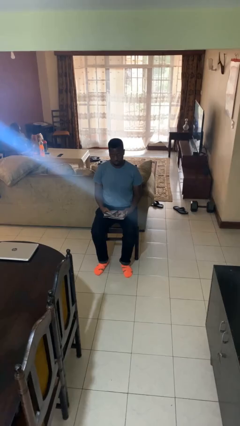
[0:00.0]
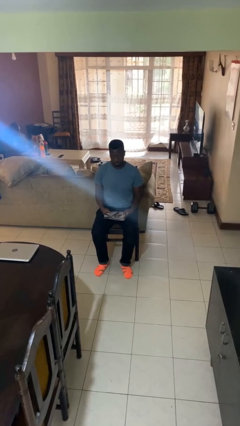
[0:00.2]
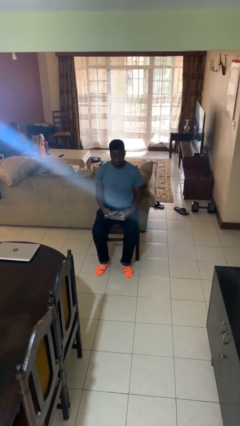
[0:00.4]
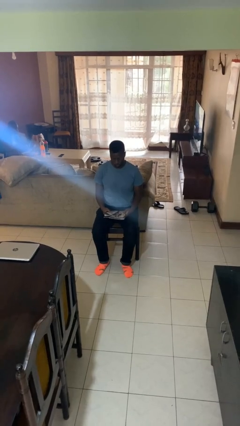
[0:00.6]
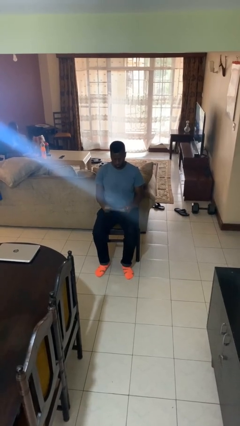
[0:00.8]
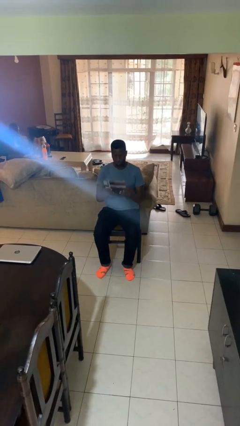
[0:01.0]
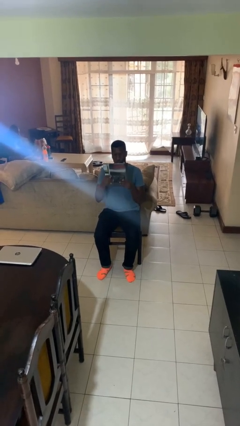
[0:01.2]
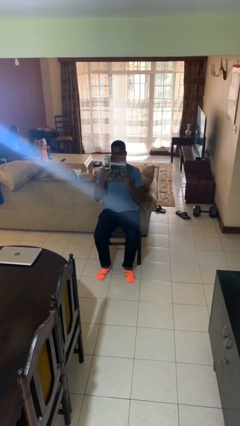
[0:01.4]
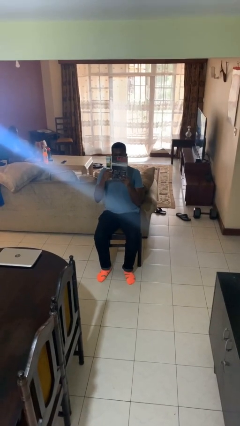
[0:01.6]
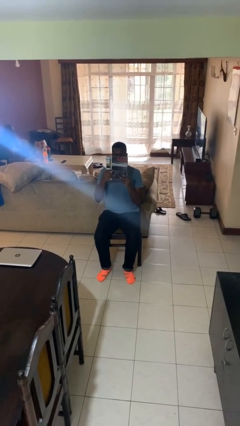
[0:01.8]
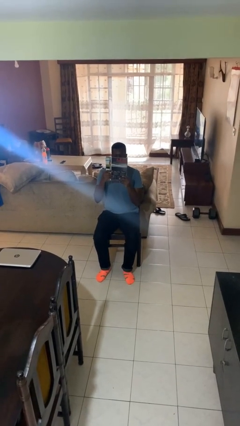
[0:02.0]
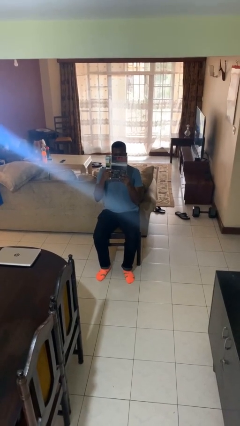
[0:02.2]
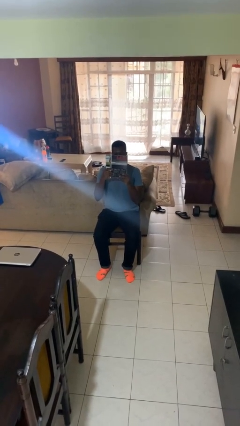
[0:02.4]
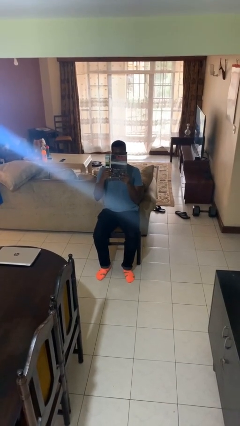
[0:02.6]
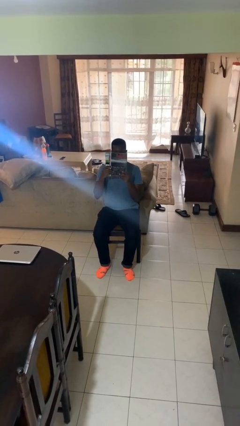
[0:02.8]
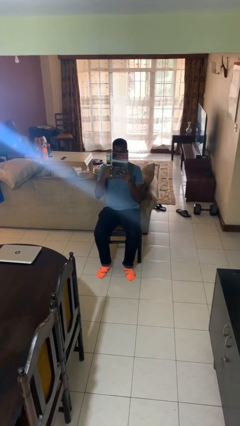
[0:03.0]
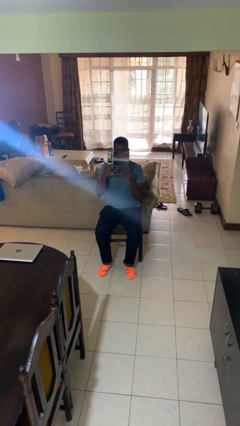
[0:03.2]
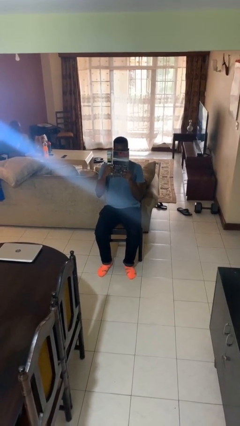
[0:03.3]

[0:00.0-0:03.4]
person reads document

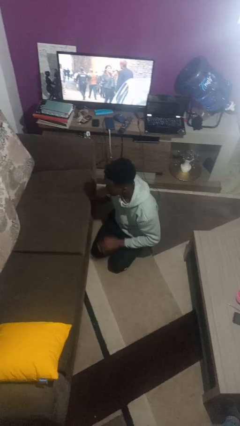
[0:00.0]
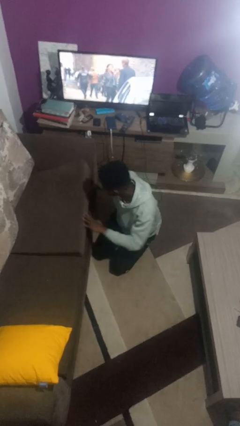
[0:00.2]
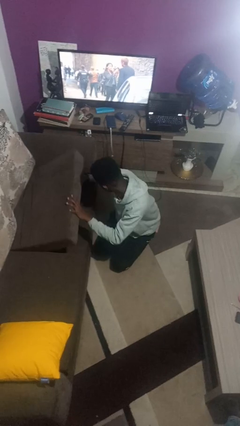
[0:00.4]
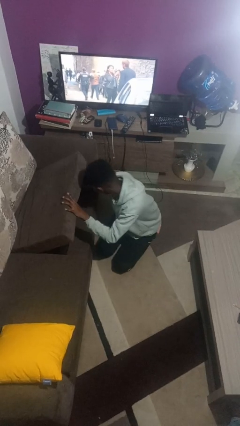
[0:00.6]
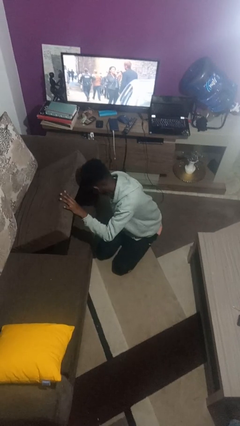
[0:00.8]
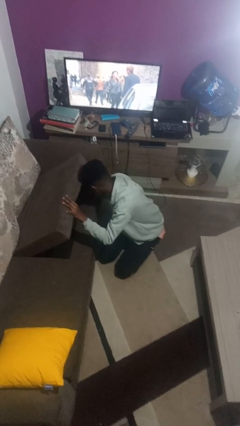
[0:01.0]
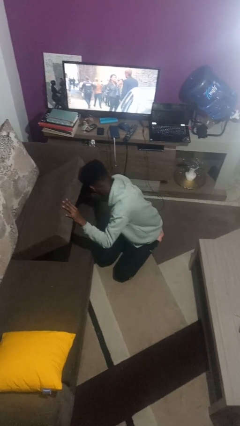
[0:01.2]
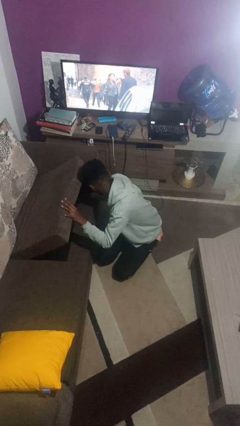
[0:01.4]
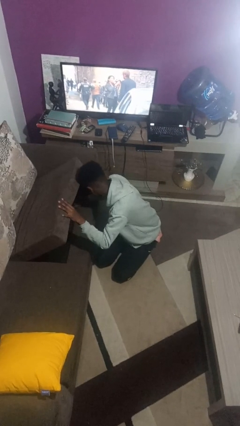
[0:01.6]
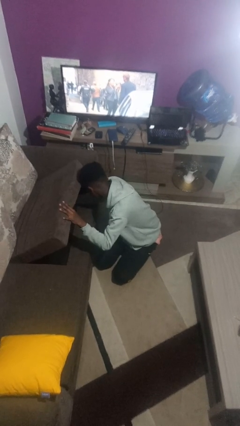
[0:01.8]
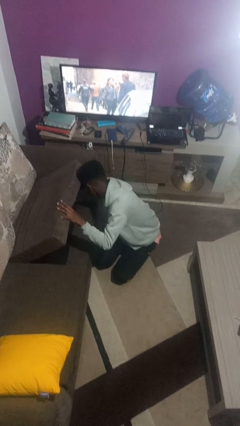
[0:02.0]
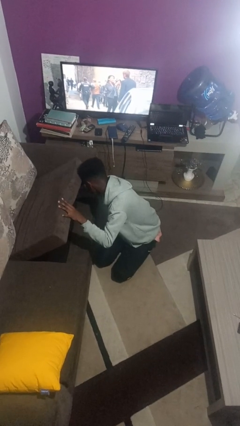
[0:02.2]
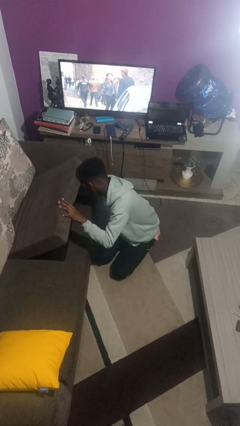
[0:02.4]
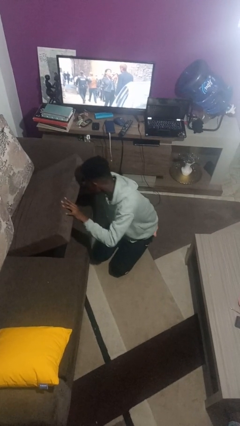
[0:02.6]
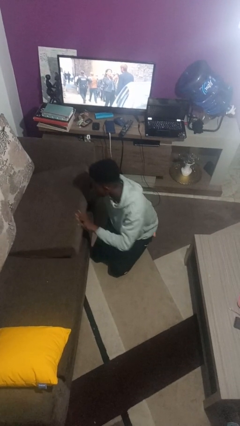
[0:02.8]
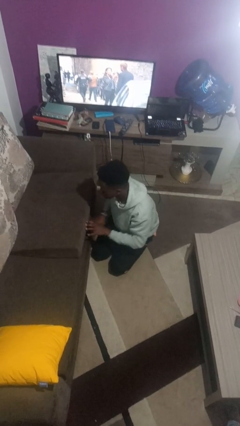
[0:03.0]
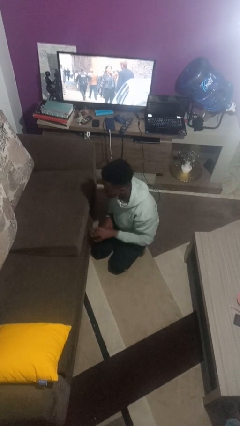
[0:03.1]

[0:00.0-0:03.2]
person searches under couch

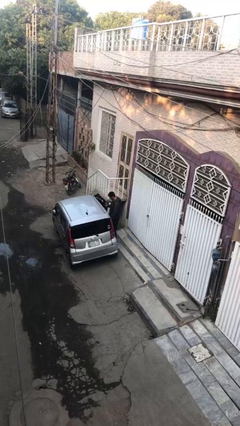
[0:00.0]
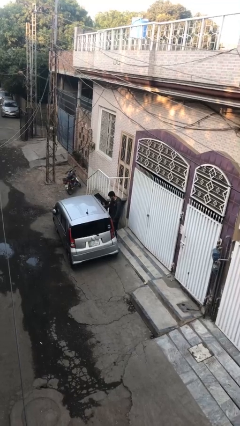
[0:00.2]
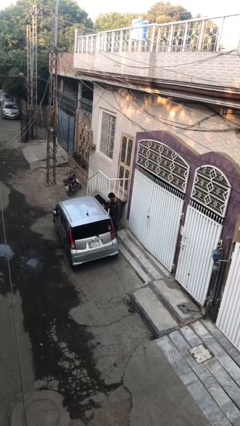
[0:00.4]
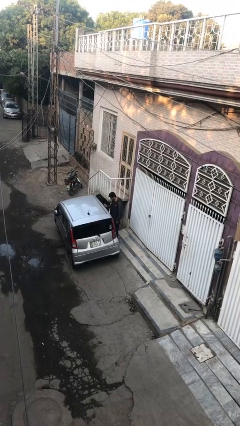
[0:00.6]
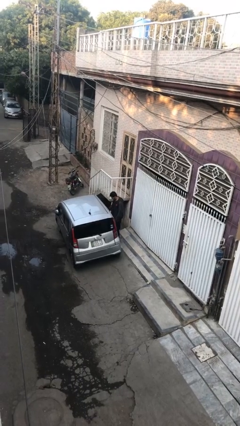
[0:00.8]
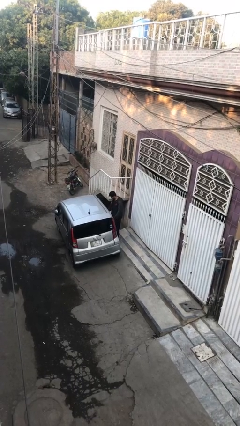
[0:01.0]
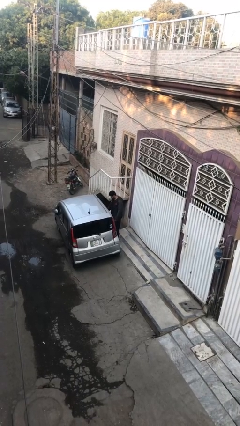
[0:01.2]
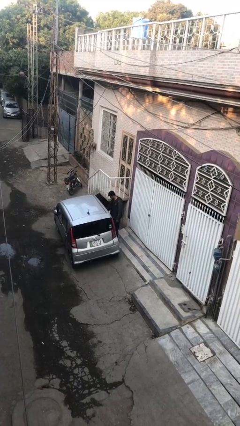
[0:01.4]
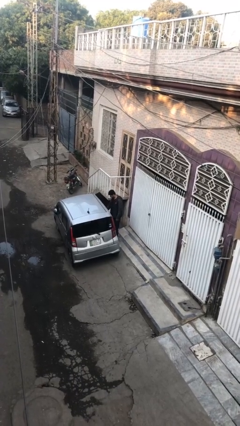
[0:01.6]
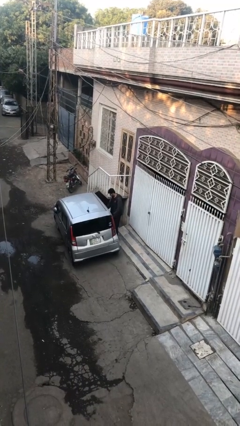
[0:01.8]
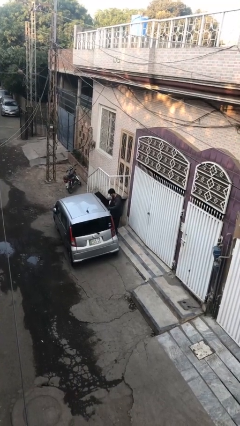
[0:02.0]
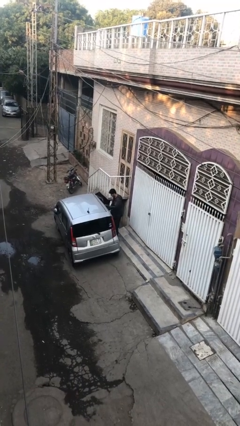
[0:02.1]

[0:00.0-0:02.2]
person closes car door

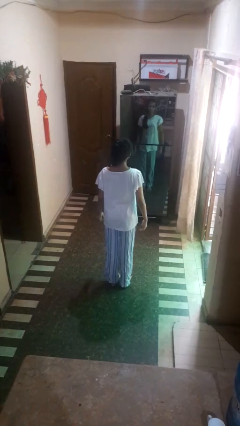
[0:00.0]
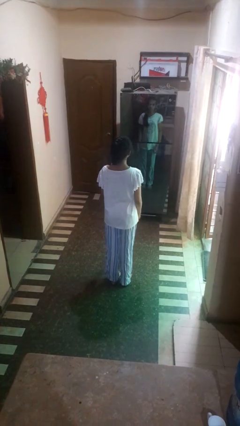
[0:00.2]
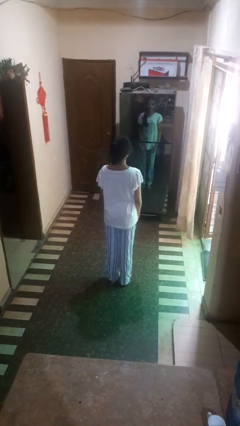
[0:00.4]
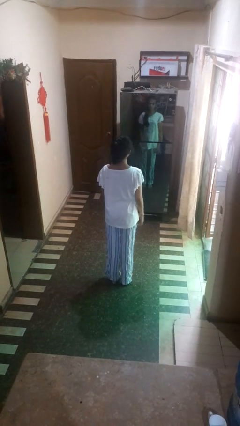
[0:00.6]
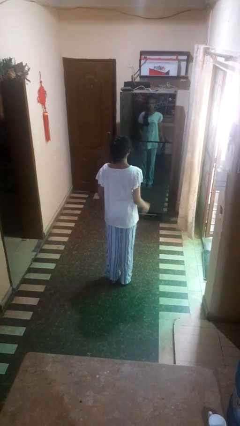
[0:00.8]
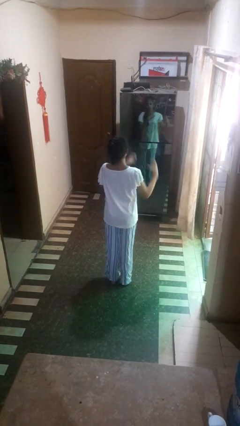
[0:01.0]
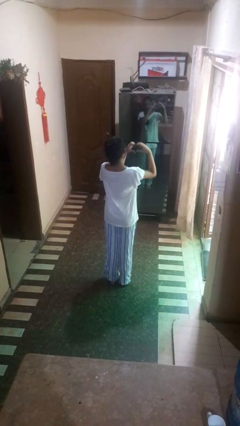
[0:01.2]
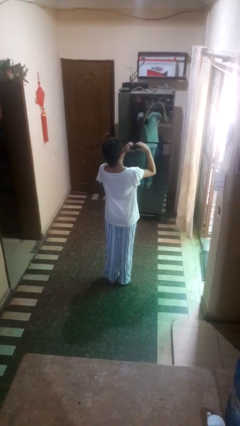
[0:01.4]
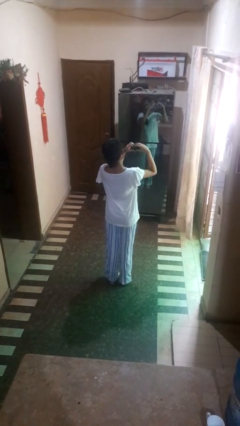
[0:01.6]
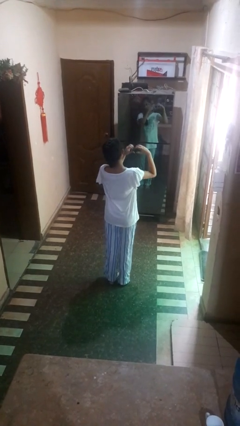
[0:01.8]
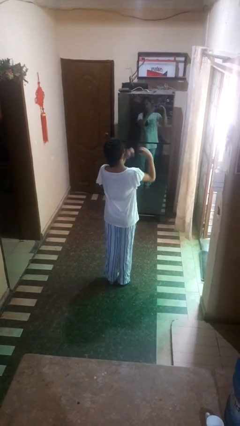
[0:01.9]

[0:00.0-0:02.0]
person gestures heart

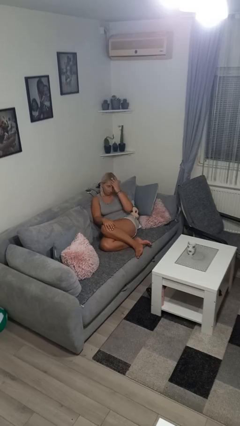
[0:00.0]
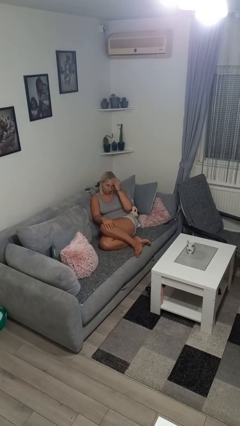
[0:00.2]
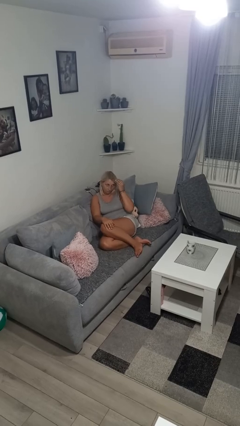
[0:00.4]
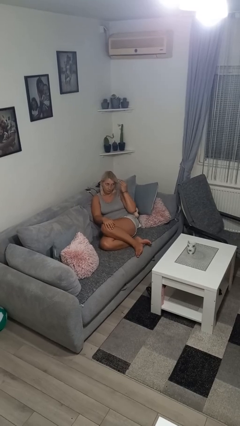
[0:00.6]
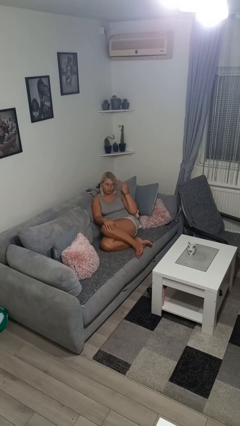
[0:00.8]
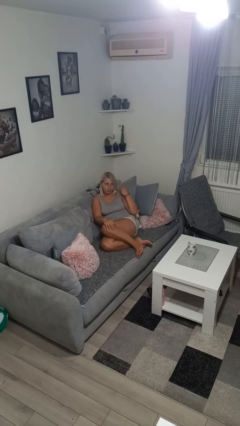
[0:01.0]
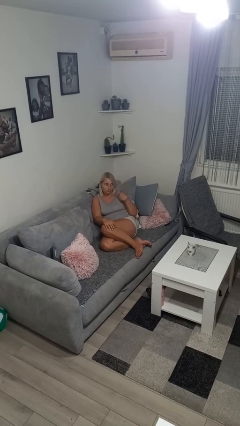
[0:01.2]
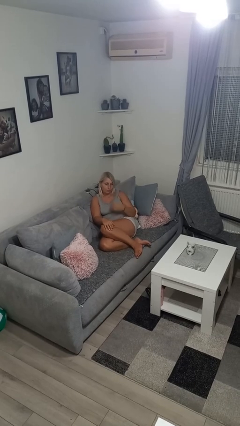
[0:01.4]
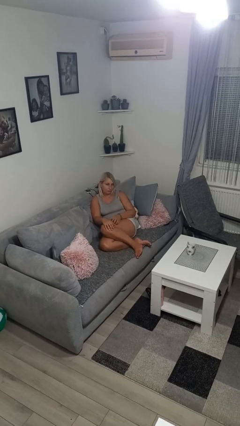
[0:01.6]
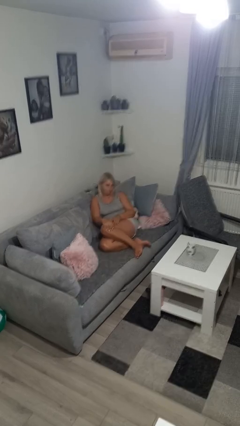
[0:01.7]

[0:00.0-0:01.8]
person strokes hair

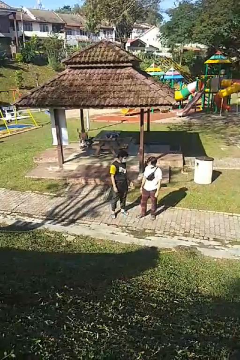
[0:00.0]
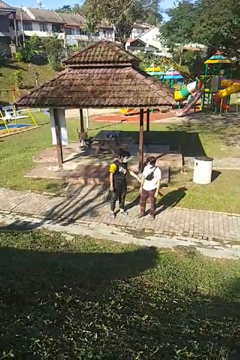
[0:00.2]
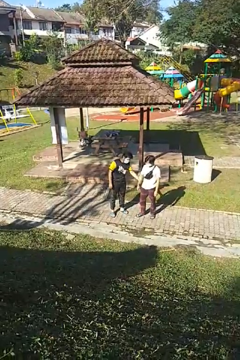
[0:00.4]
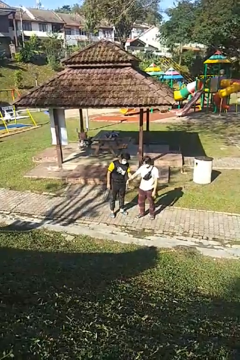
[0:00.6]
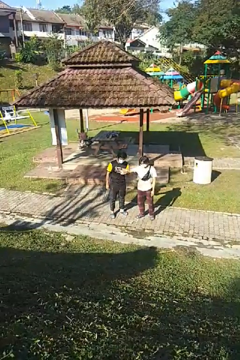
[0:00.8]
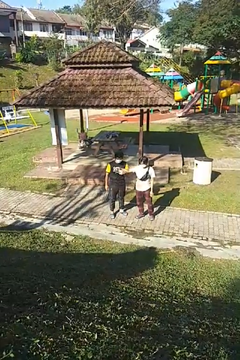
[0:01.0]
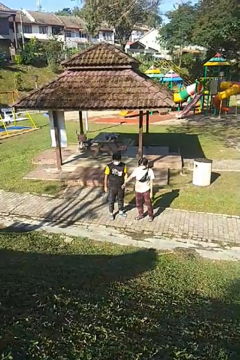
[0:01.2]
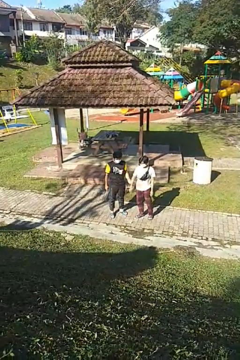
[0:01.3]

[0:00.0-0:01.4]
person grabs person by forearm

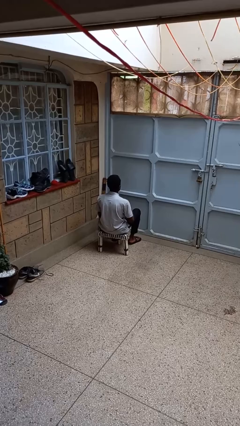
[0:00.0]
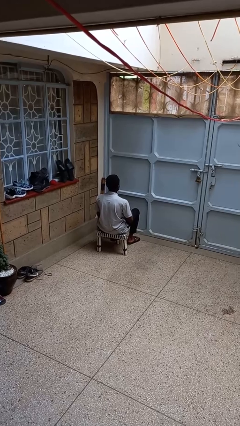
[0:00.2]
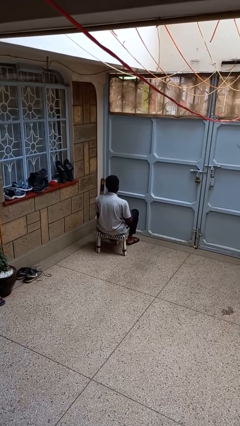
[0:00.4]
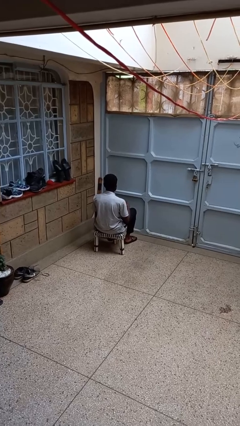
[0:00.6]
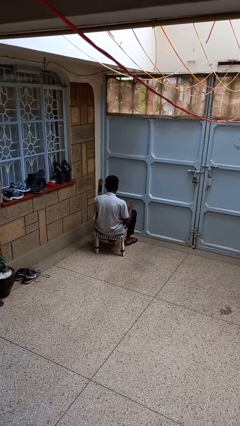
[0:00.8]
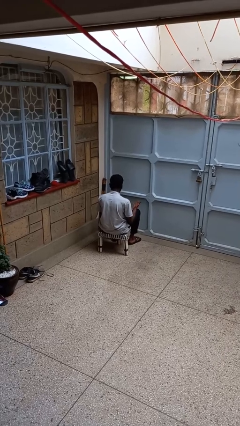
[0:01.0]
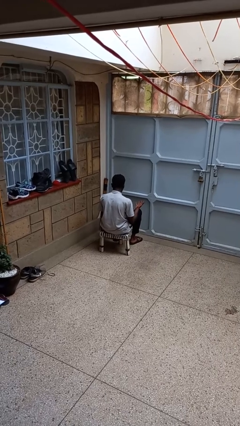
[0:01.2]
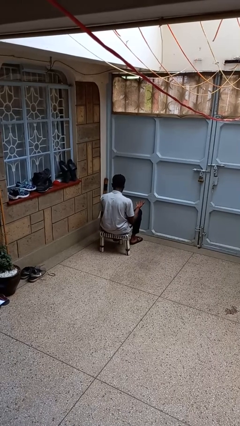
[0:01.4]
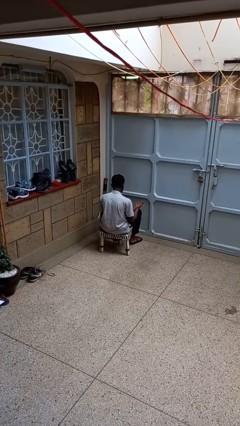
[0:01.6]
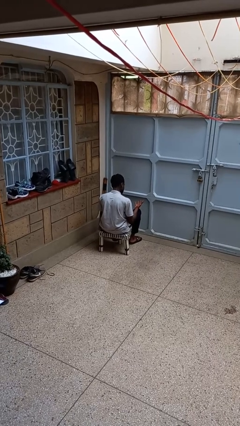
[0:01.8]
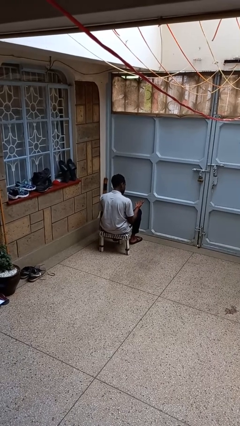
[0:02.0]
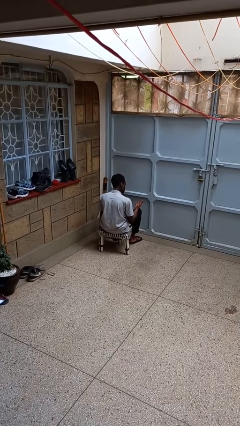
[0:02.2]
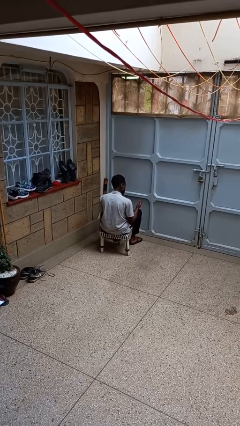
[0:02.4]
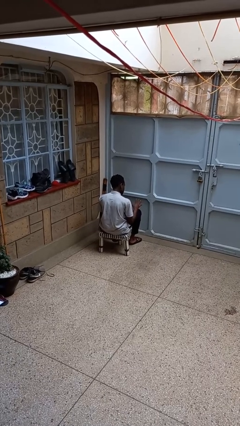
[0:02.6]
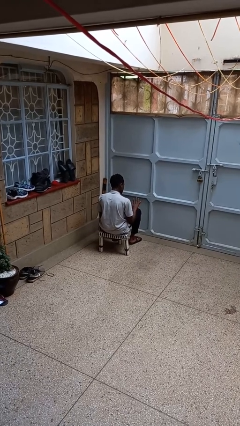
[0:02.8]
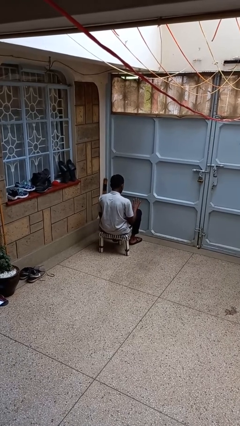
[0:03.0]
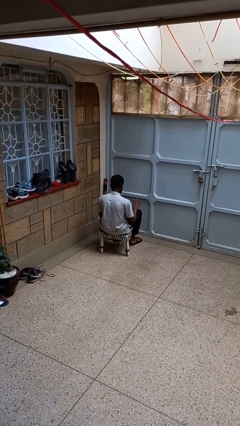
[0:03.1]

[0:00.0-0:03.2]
person looks at hands in lap
